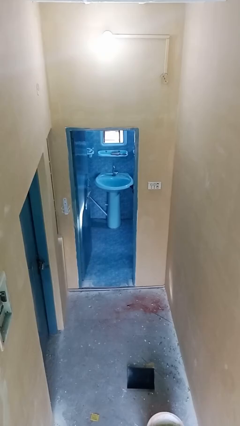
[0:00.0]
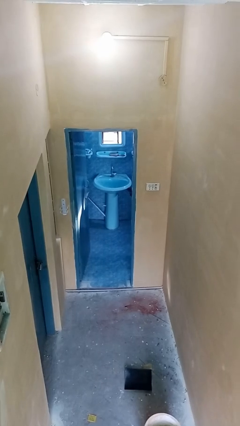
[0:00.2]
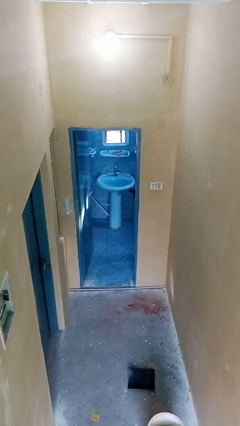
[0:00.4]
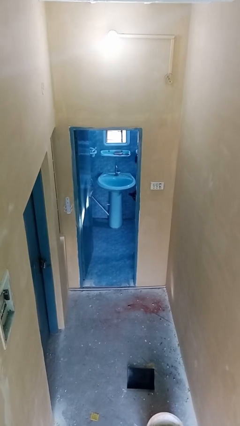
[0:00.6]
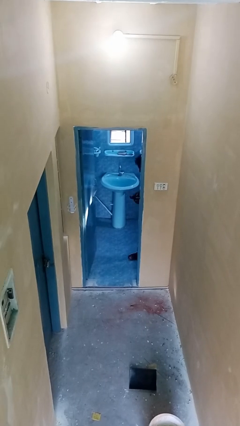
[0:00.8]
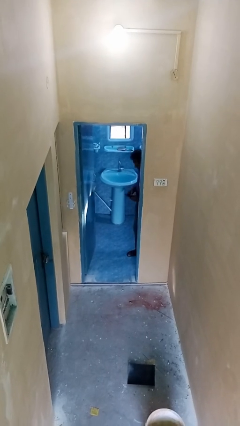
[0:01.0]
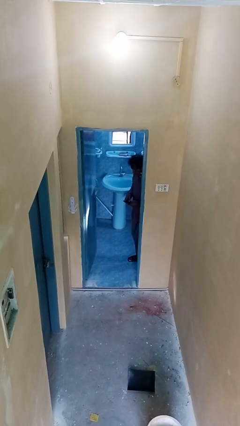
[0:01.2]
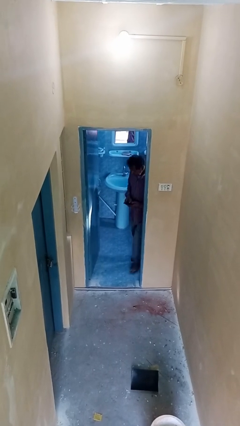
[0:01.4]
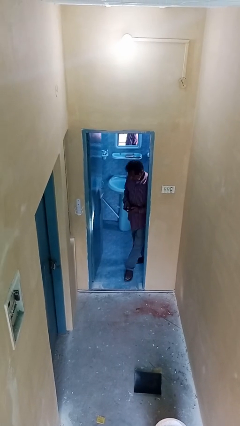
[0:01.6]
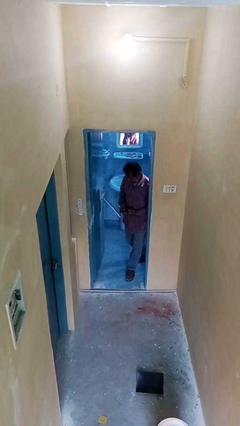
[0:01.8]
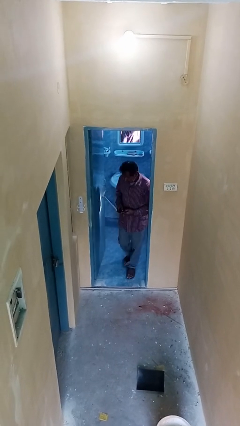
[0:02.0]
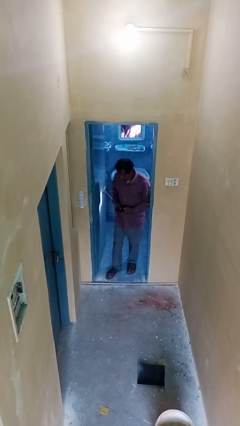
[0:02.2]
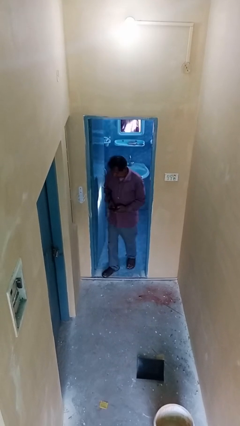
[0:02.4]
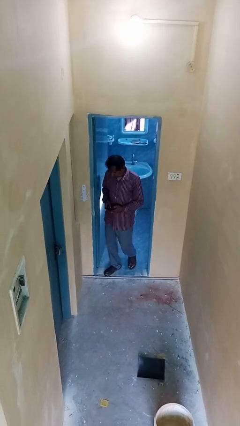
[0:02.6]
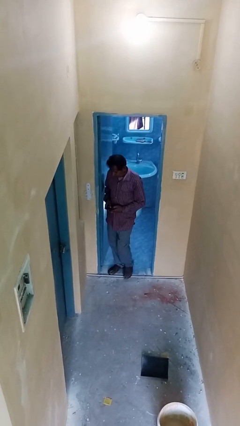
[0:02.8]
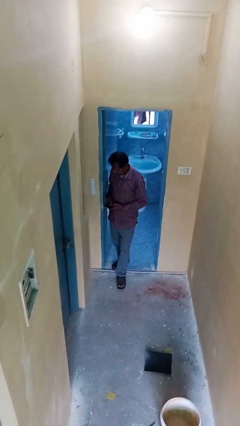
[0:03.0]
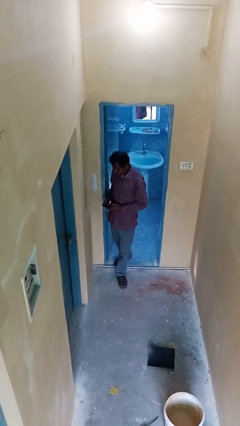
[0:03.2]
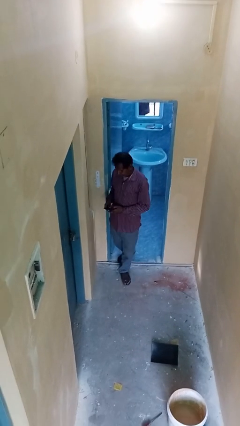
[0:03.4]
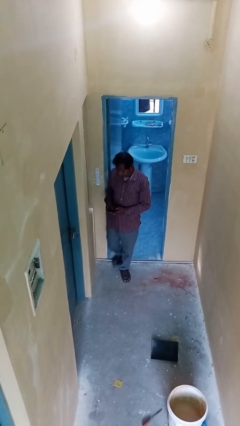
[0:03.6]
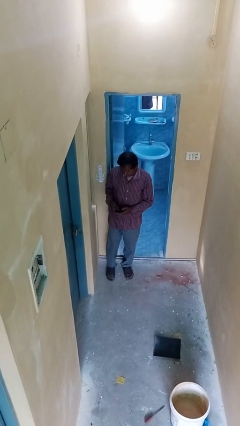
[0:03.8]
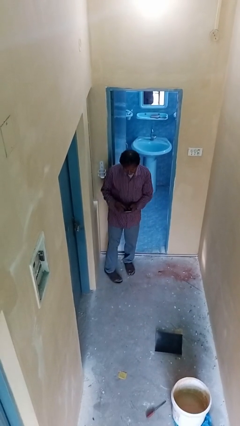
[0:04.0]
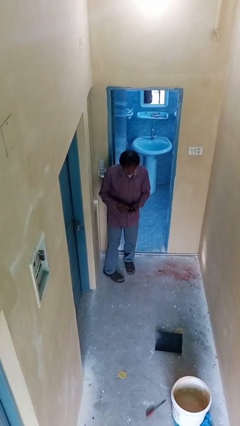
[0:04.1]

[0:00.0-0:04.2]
person enters scene through structure

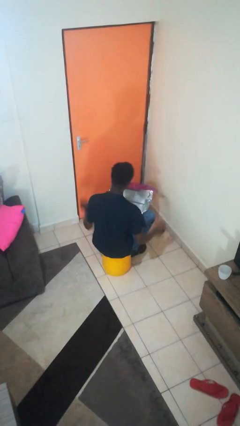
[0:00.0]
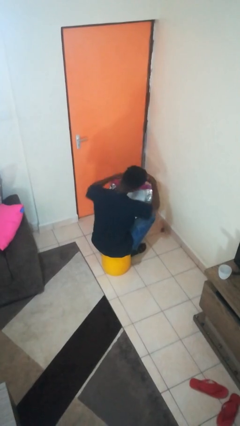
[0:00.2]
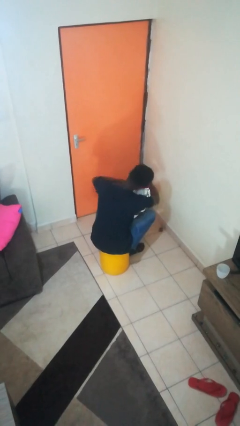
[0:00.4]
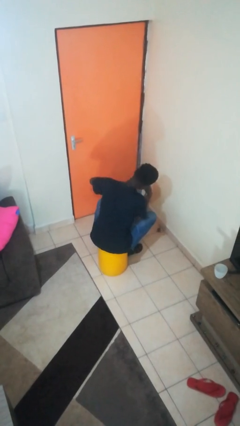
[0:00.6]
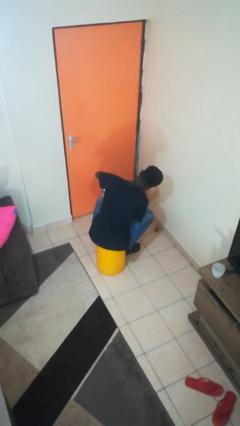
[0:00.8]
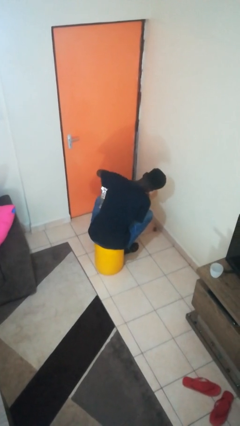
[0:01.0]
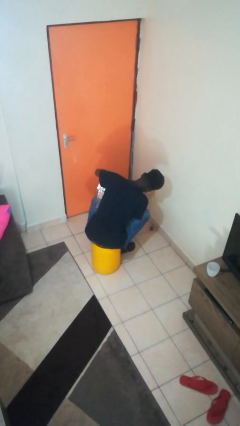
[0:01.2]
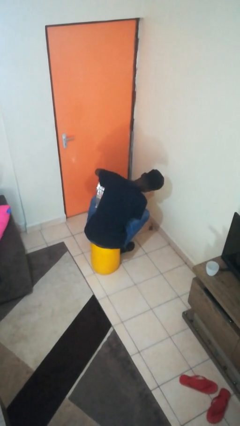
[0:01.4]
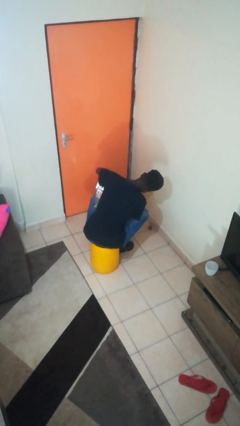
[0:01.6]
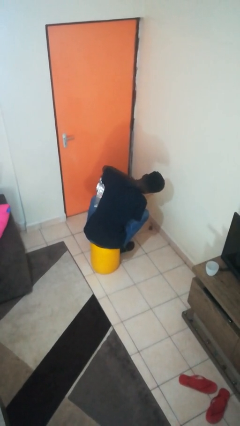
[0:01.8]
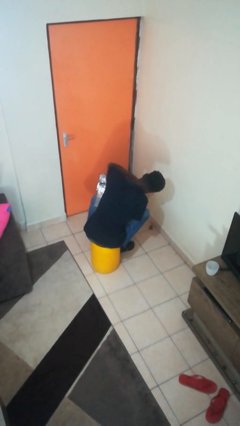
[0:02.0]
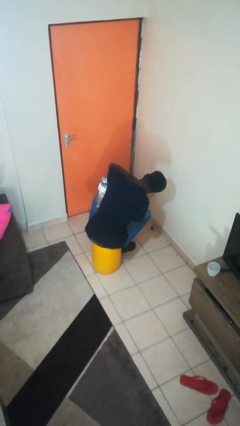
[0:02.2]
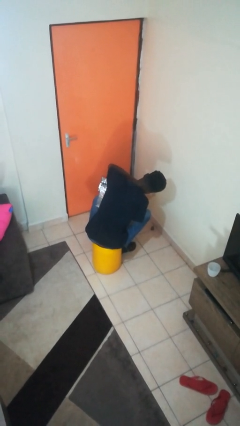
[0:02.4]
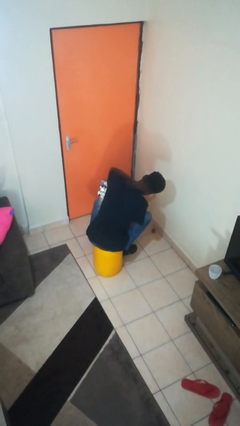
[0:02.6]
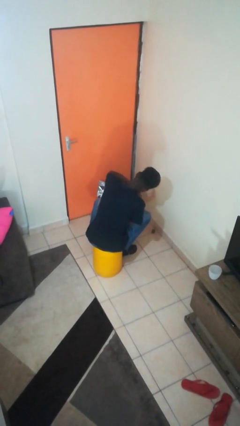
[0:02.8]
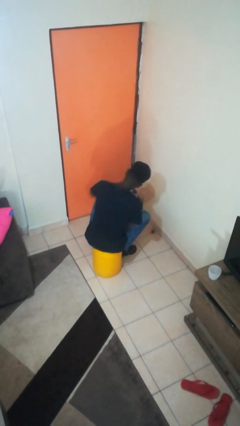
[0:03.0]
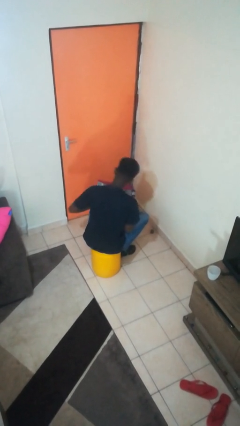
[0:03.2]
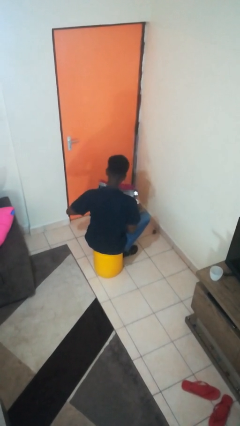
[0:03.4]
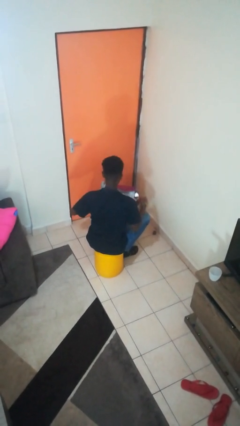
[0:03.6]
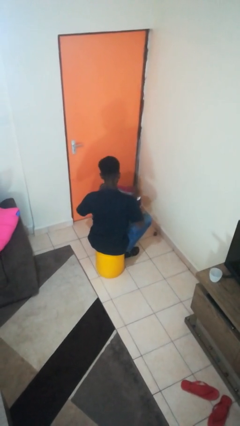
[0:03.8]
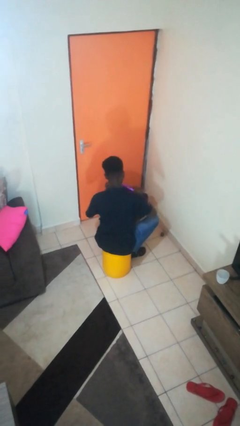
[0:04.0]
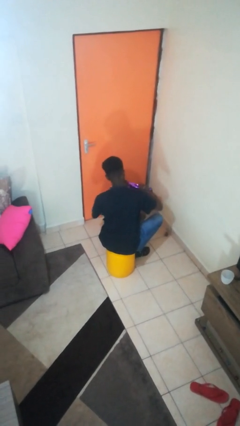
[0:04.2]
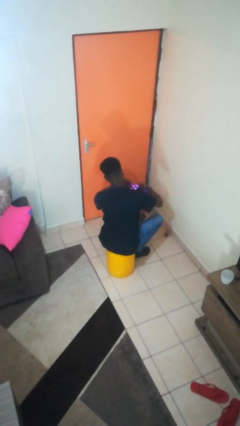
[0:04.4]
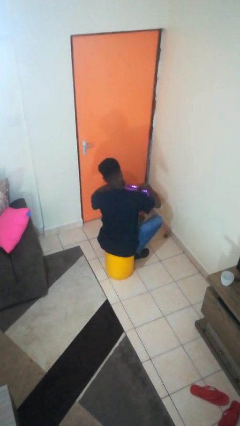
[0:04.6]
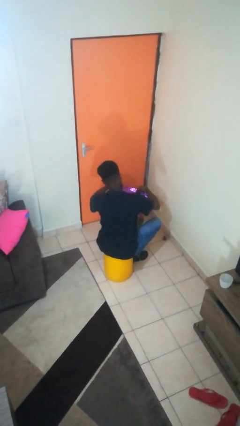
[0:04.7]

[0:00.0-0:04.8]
person wraps box

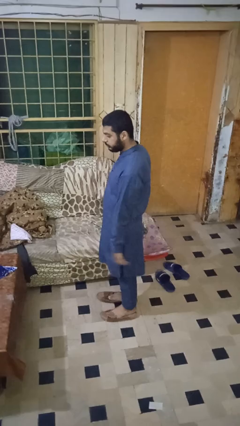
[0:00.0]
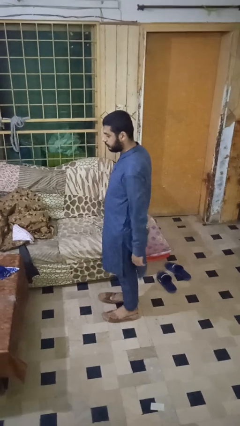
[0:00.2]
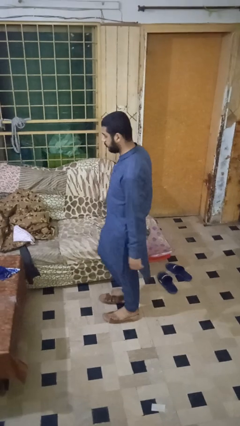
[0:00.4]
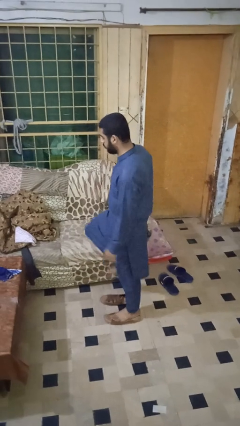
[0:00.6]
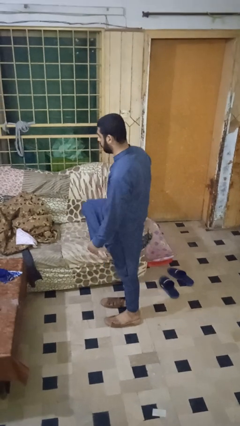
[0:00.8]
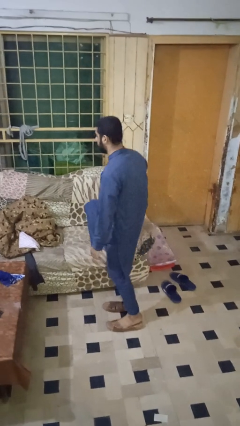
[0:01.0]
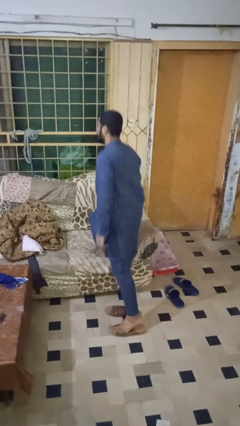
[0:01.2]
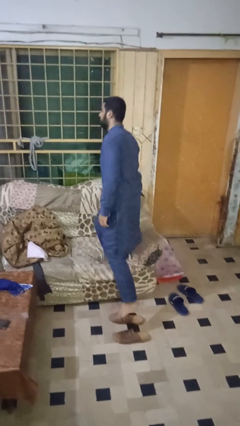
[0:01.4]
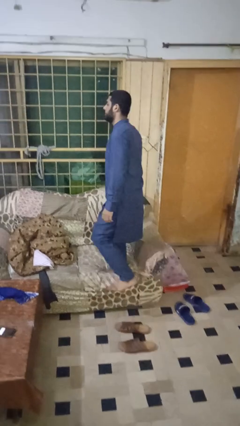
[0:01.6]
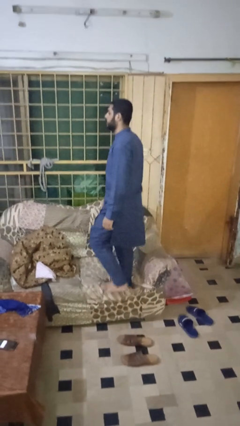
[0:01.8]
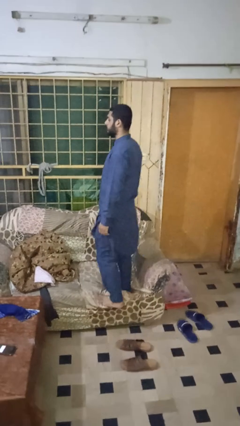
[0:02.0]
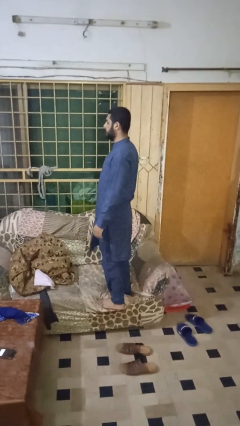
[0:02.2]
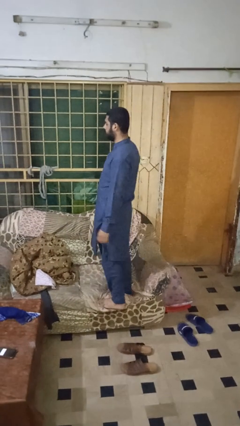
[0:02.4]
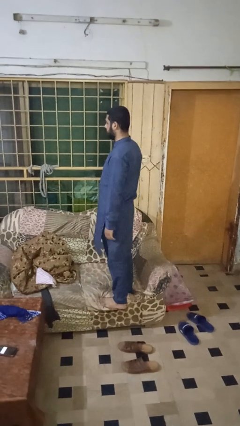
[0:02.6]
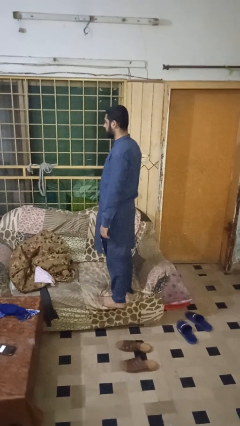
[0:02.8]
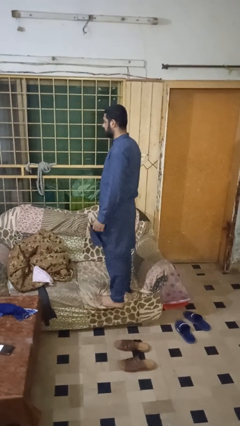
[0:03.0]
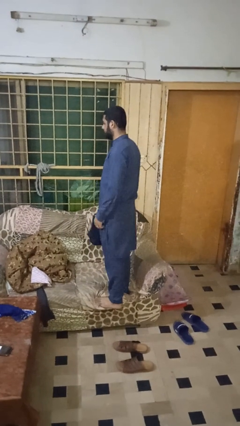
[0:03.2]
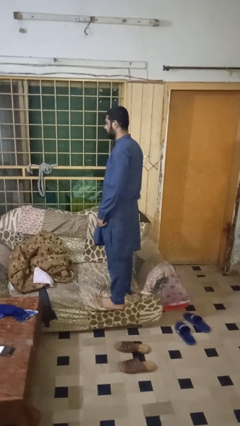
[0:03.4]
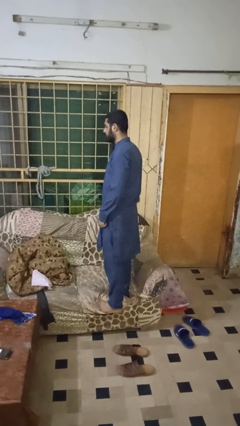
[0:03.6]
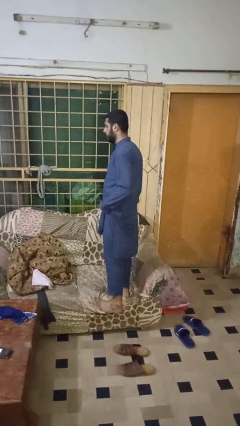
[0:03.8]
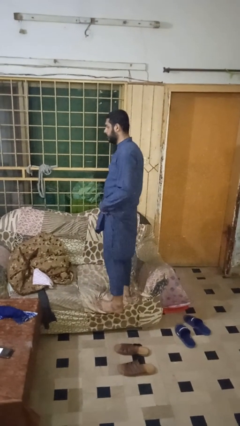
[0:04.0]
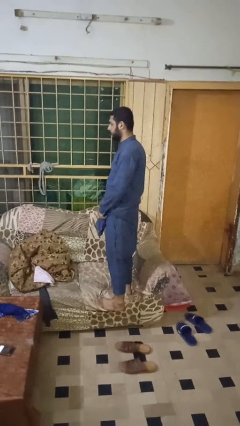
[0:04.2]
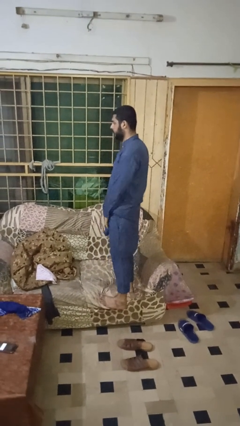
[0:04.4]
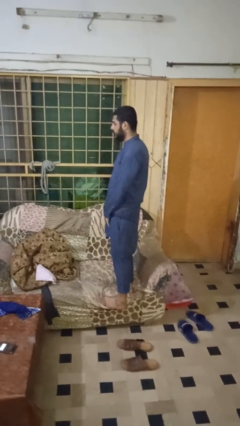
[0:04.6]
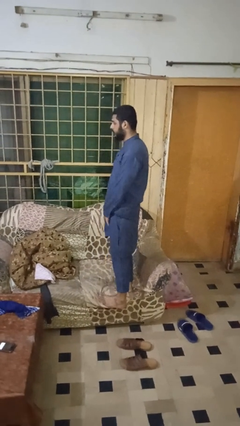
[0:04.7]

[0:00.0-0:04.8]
person climbs on couch

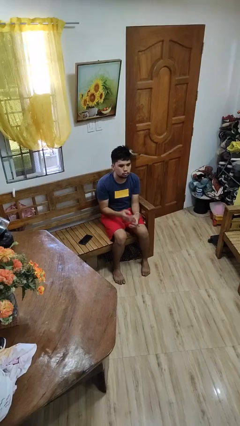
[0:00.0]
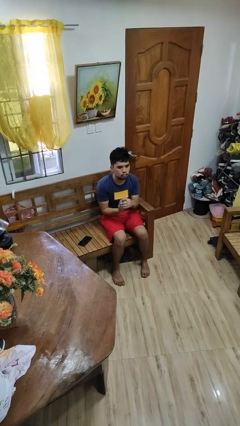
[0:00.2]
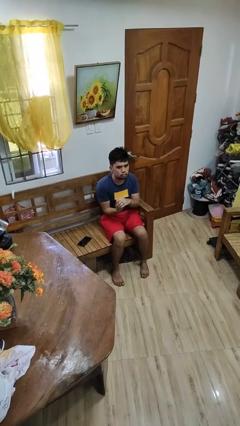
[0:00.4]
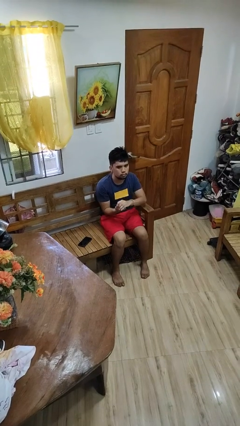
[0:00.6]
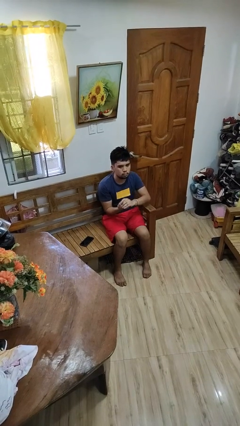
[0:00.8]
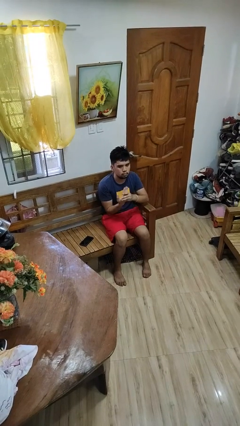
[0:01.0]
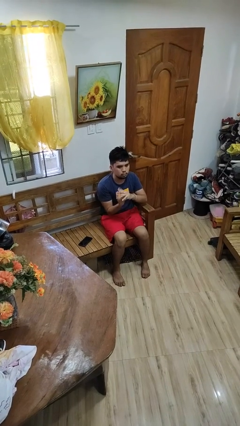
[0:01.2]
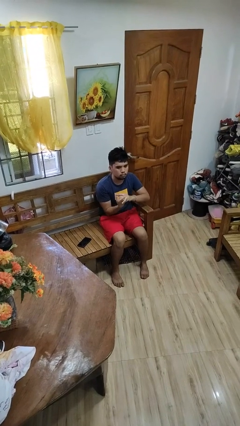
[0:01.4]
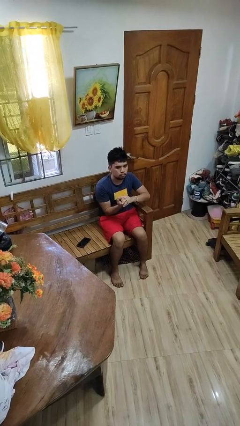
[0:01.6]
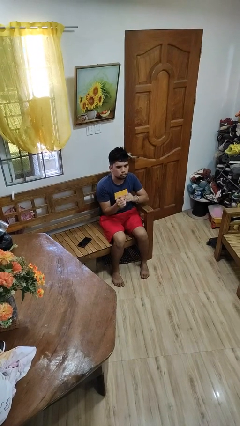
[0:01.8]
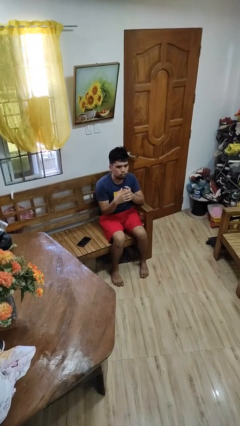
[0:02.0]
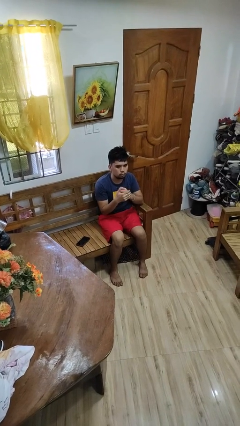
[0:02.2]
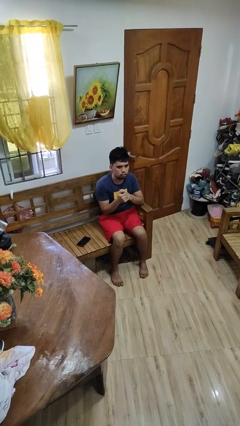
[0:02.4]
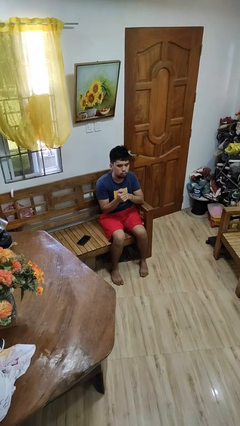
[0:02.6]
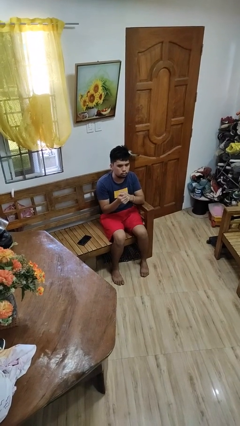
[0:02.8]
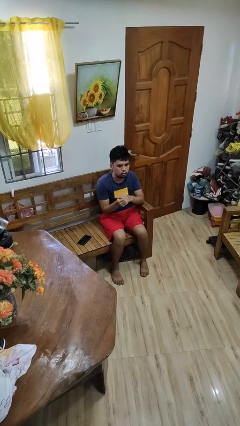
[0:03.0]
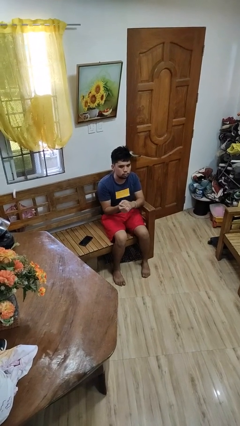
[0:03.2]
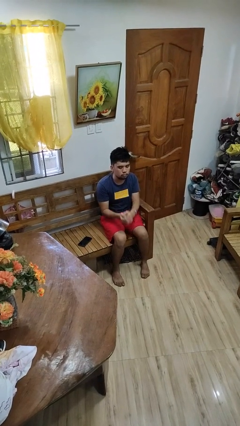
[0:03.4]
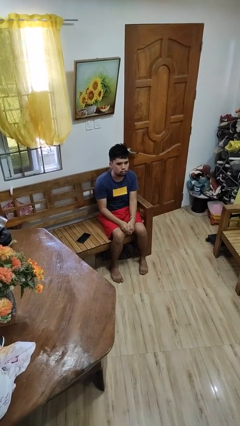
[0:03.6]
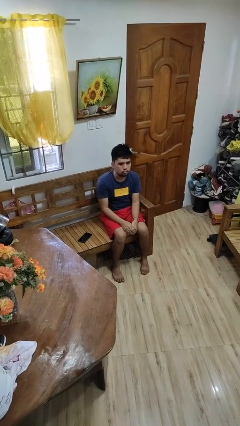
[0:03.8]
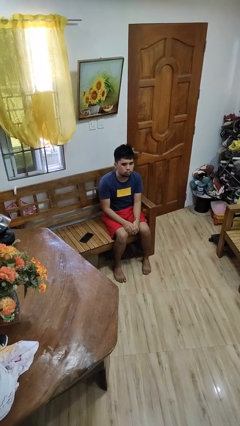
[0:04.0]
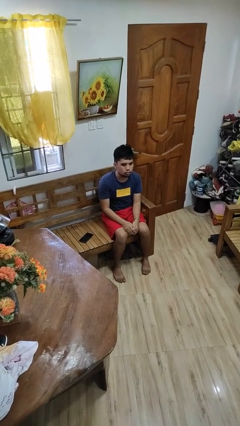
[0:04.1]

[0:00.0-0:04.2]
person cracks knuckles
